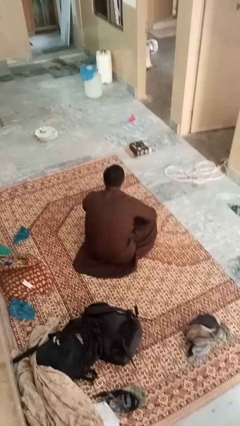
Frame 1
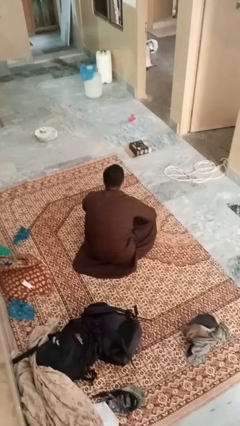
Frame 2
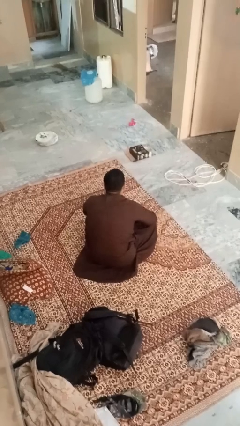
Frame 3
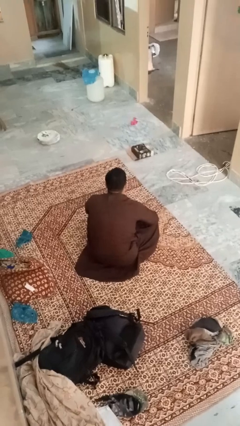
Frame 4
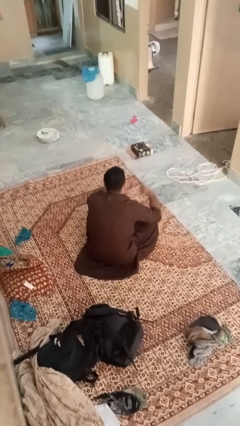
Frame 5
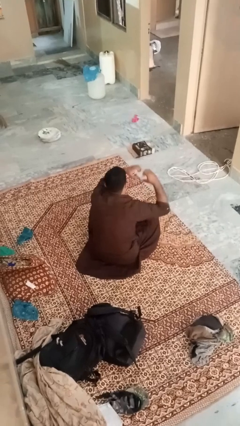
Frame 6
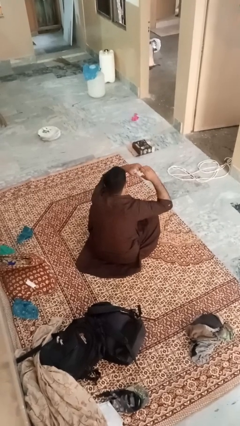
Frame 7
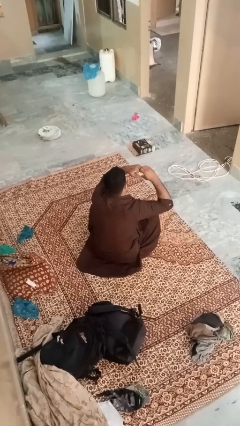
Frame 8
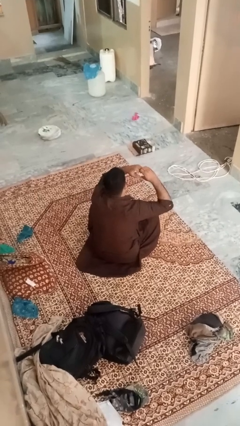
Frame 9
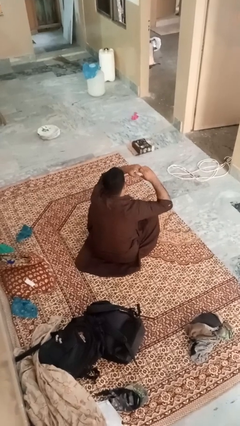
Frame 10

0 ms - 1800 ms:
person gestures heart

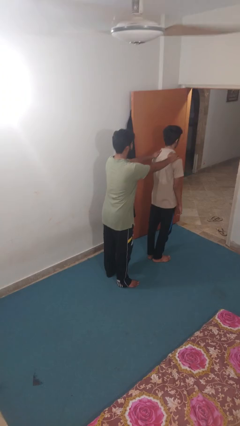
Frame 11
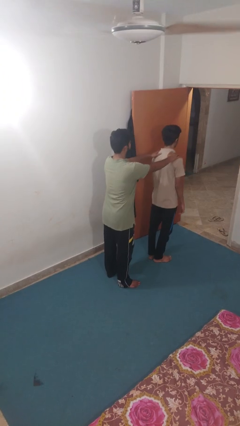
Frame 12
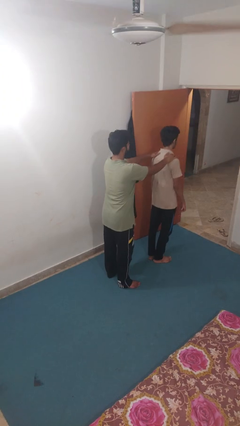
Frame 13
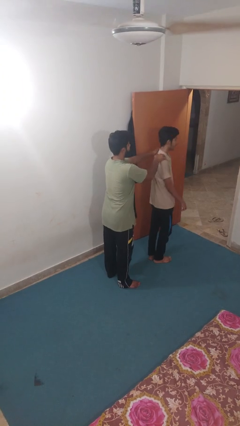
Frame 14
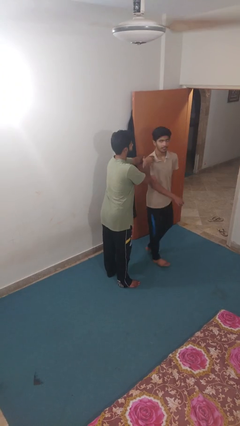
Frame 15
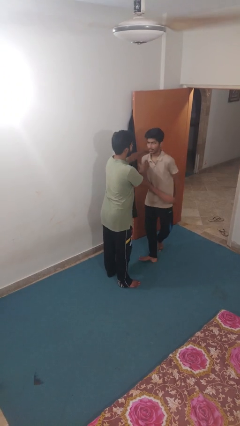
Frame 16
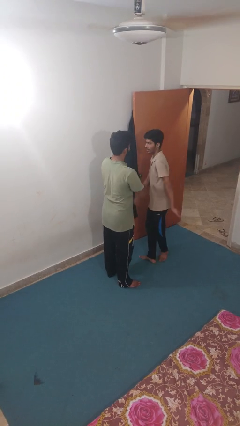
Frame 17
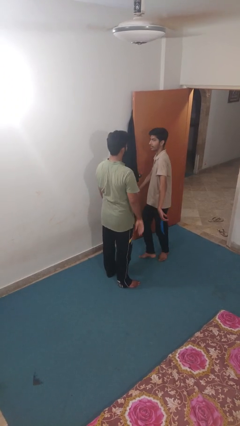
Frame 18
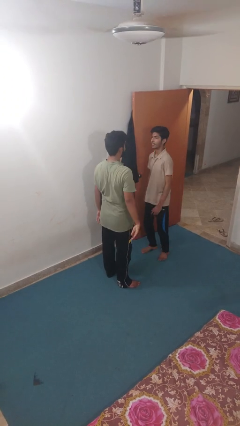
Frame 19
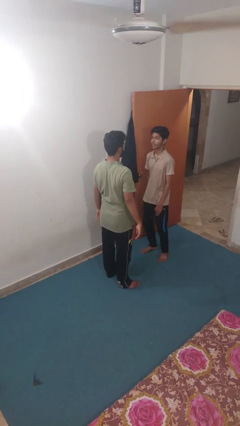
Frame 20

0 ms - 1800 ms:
person spins person around

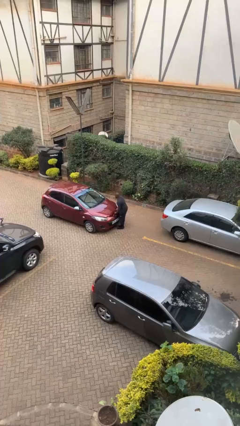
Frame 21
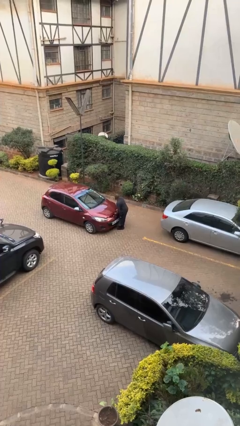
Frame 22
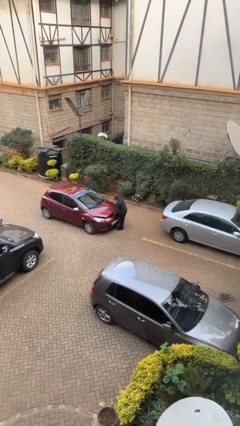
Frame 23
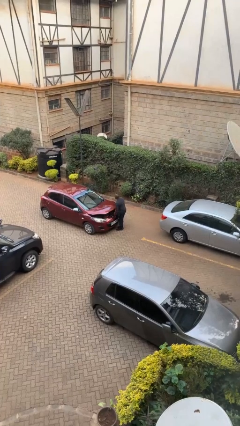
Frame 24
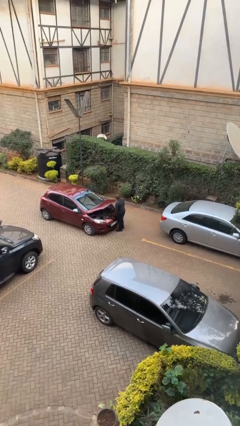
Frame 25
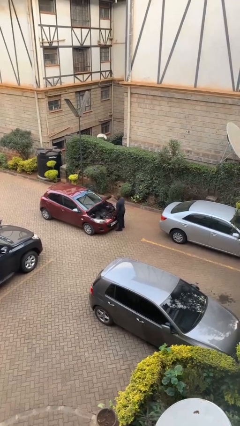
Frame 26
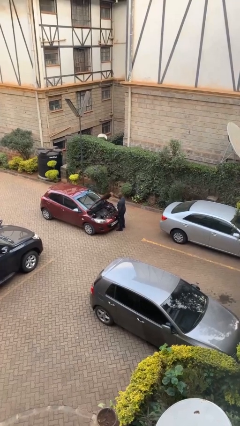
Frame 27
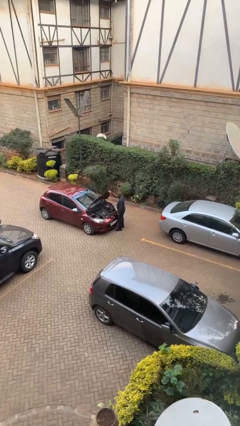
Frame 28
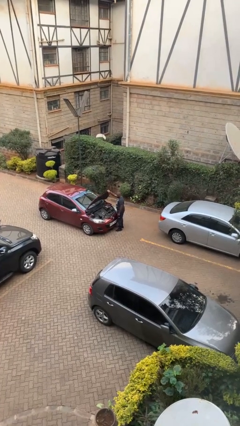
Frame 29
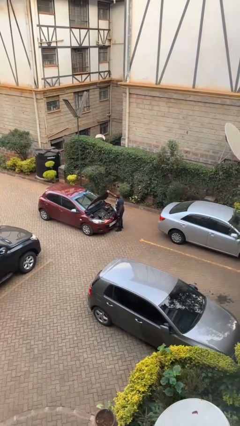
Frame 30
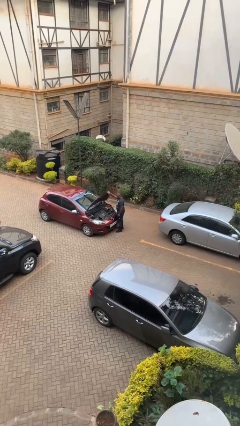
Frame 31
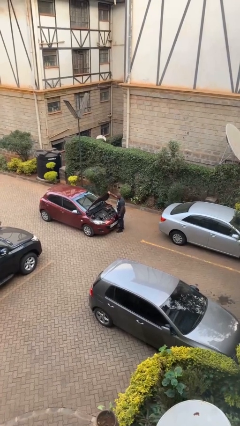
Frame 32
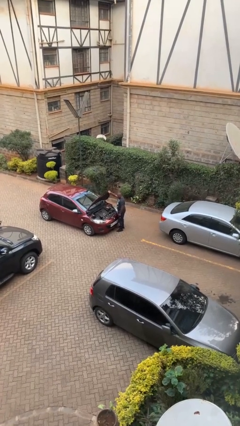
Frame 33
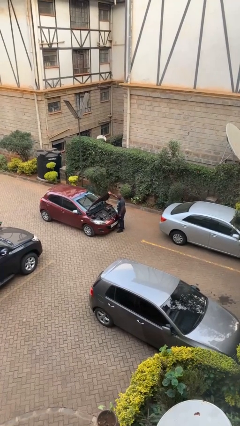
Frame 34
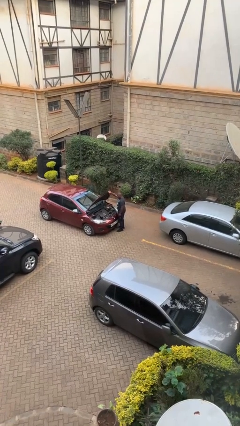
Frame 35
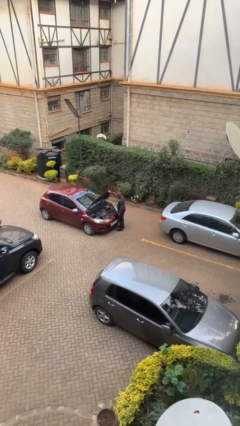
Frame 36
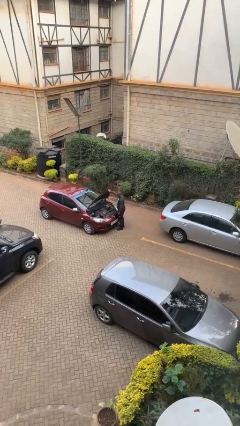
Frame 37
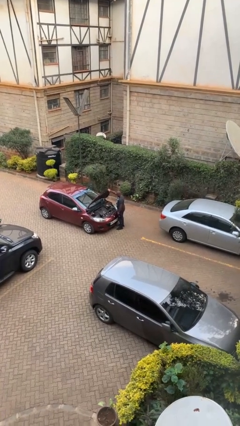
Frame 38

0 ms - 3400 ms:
person opens car hood

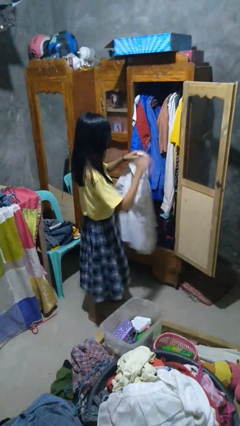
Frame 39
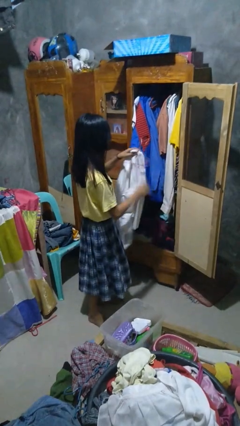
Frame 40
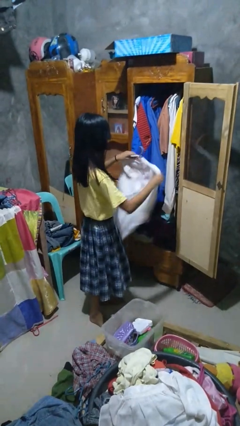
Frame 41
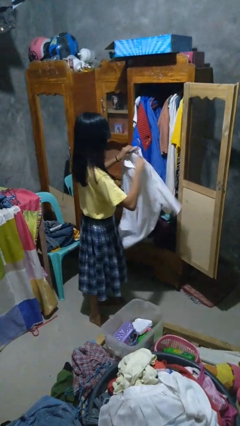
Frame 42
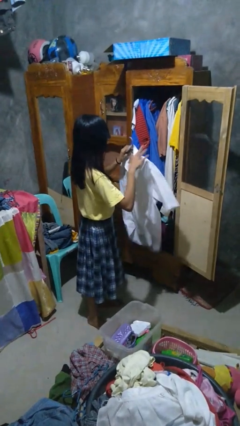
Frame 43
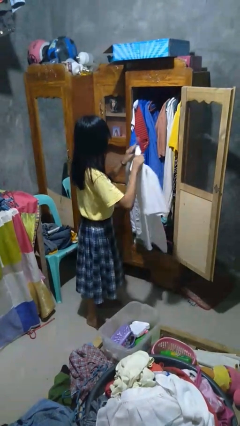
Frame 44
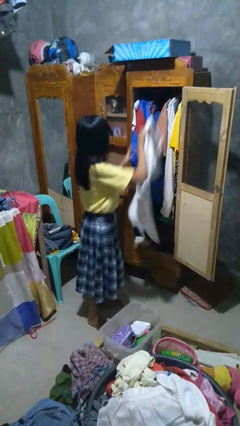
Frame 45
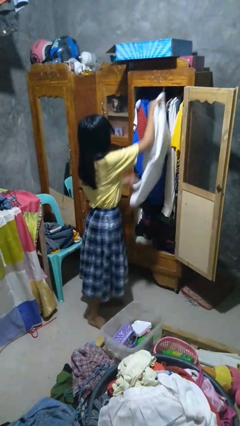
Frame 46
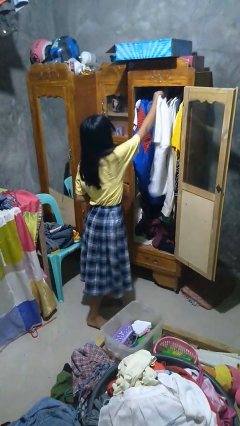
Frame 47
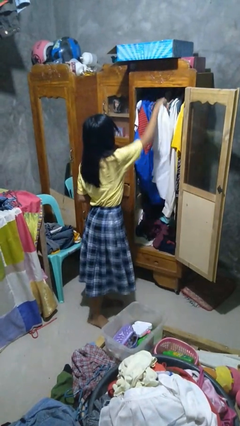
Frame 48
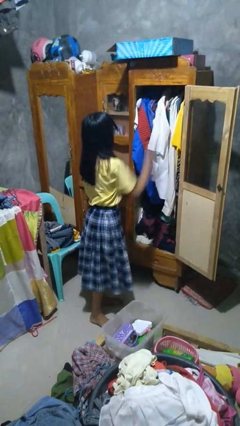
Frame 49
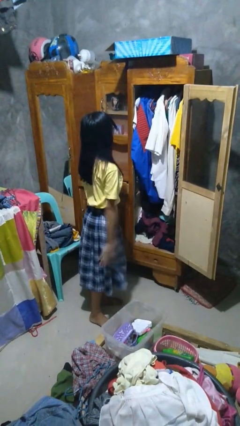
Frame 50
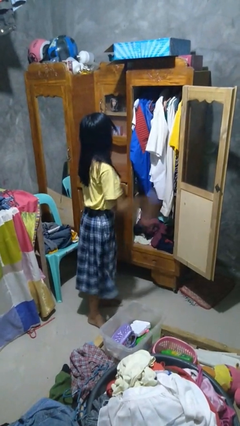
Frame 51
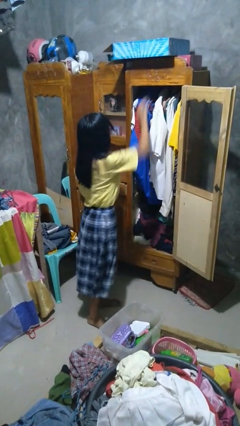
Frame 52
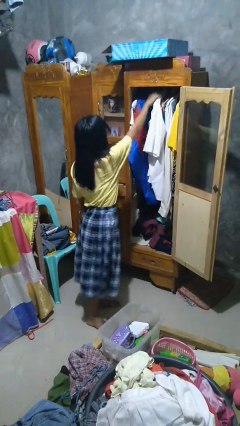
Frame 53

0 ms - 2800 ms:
person puts clothes into closet

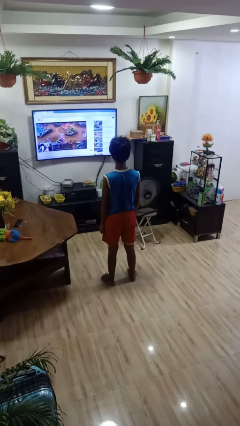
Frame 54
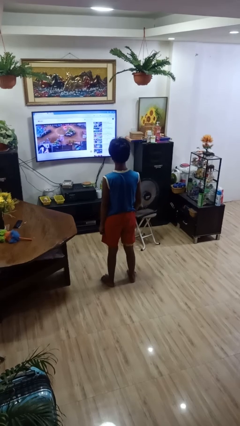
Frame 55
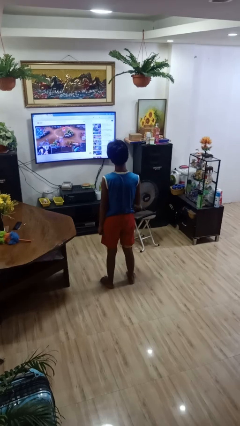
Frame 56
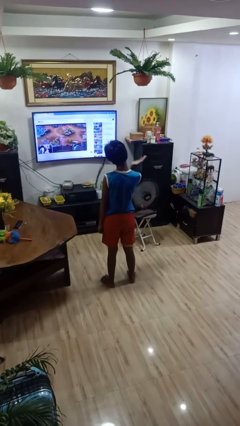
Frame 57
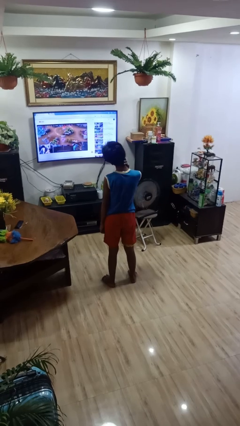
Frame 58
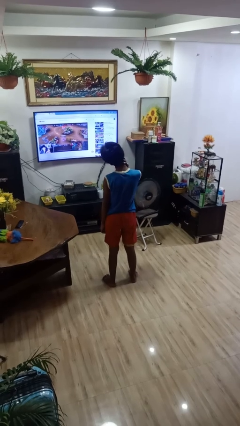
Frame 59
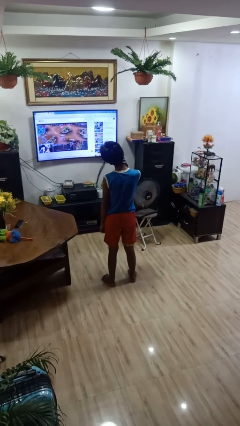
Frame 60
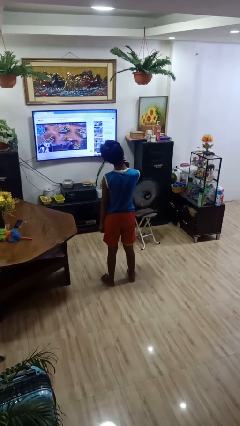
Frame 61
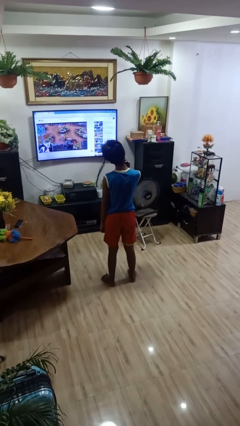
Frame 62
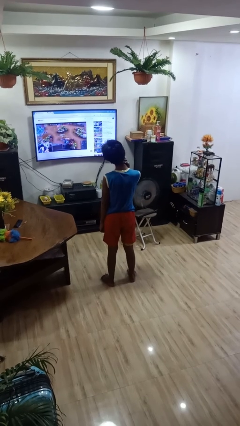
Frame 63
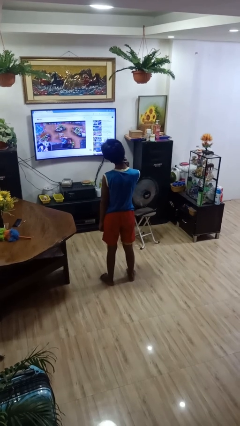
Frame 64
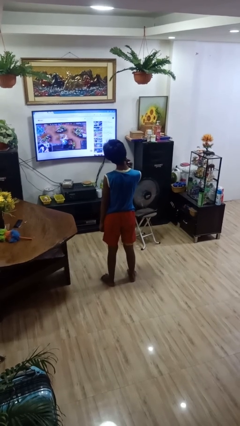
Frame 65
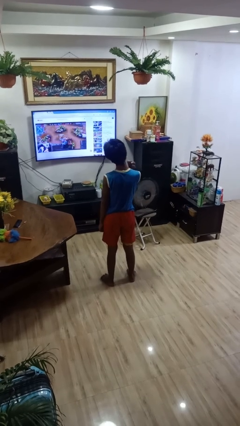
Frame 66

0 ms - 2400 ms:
person swats bug

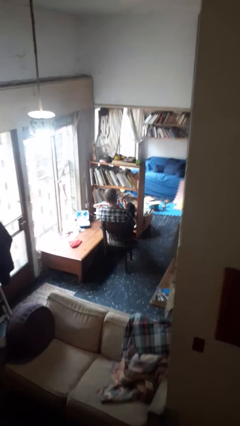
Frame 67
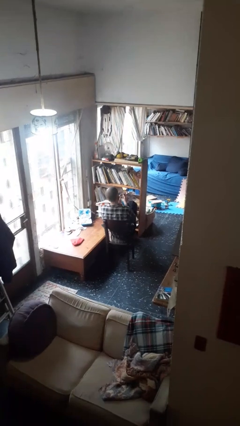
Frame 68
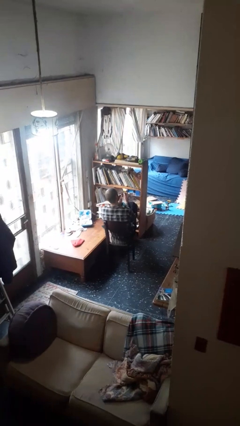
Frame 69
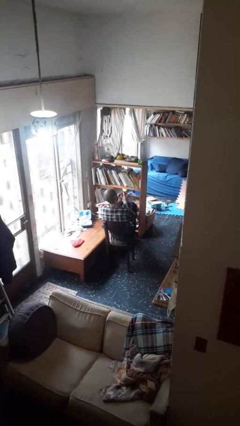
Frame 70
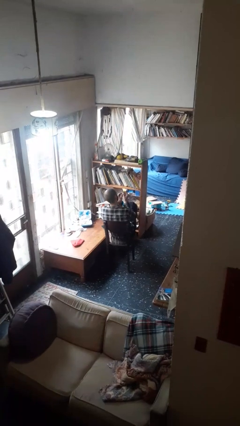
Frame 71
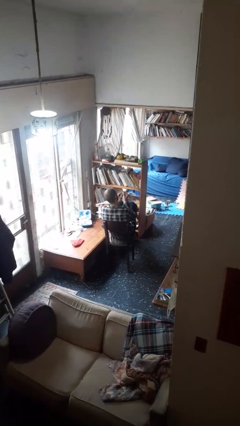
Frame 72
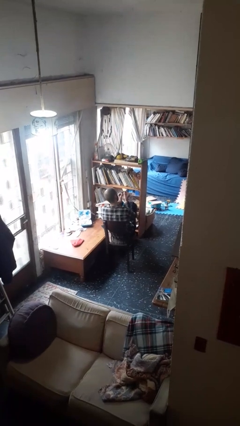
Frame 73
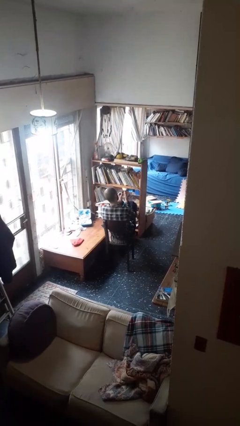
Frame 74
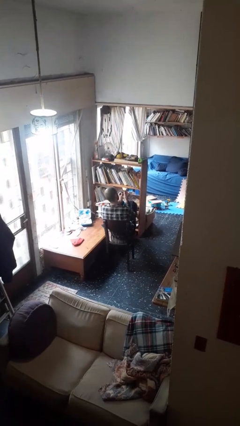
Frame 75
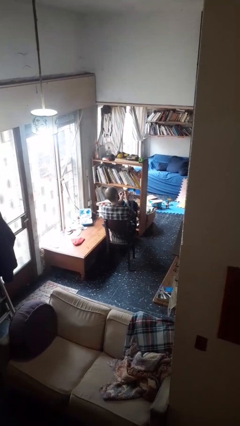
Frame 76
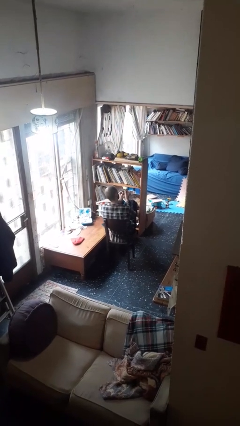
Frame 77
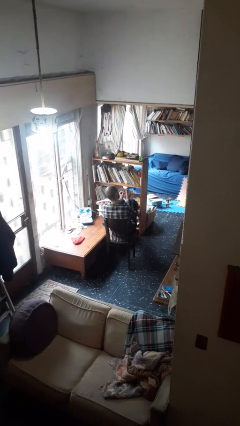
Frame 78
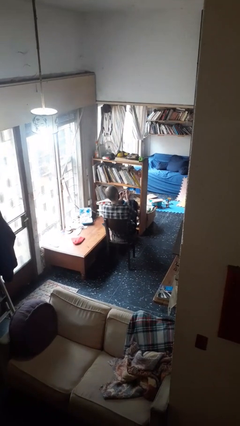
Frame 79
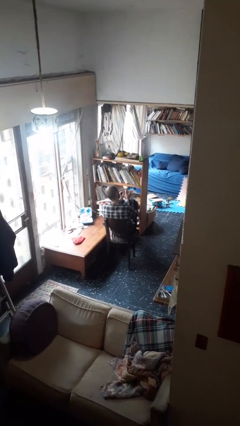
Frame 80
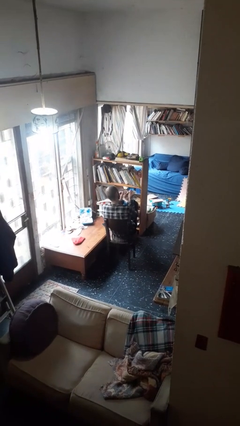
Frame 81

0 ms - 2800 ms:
person files fingernails

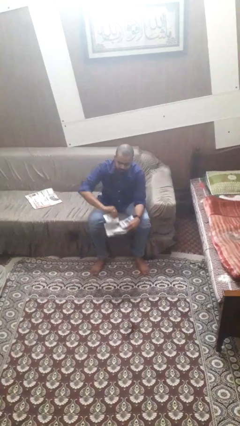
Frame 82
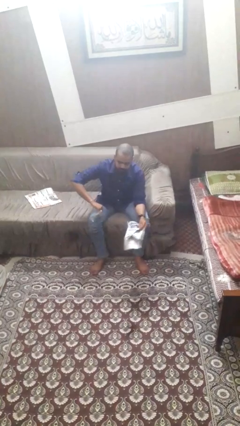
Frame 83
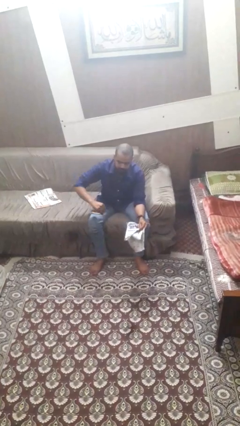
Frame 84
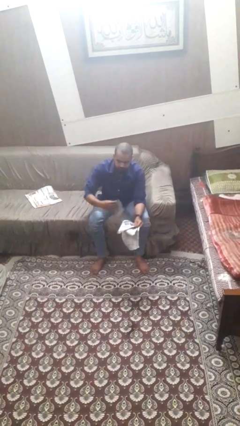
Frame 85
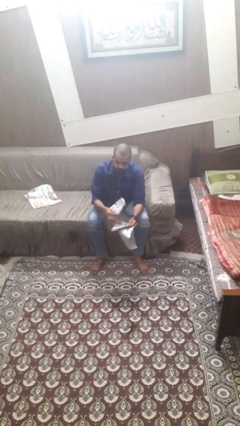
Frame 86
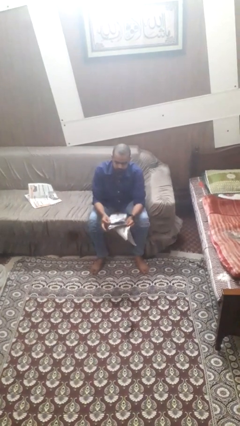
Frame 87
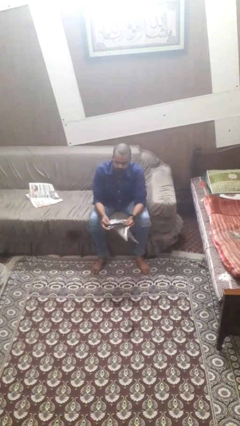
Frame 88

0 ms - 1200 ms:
person tears paper

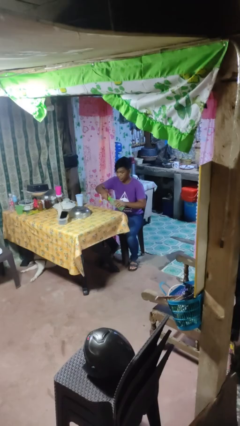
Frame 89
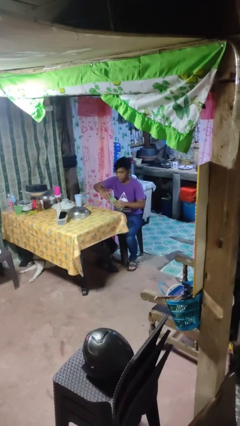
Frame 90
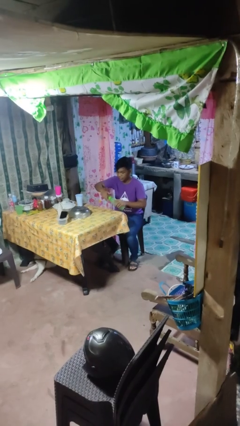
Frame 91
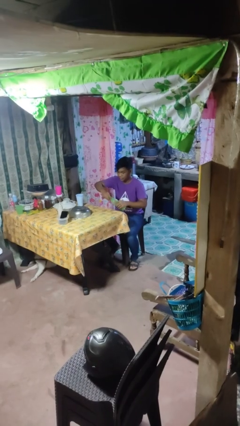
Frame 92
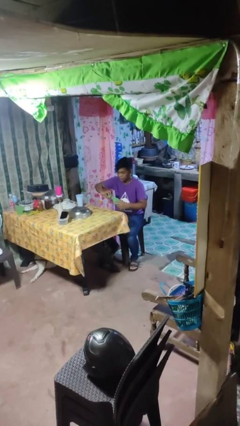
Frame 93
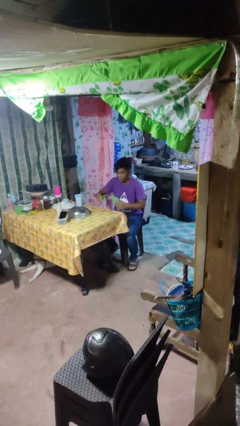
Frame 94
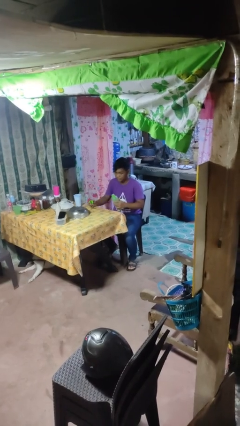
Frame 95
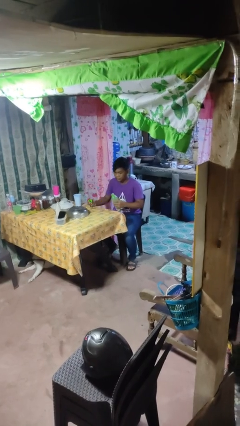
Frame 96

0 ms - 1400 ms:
person unscrews lid from bottle
